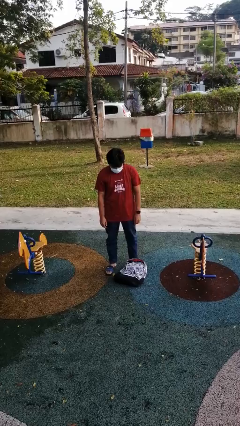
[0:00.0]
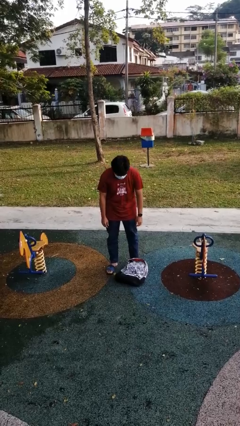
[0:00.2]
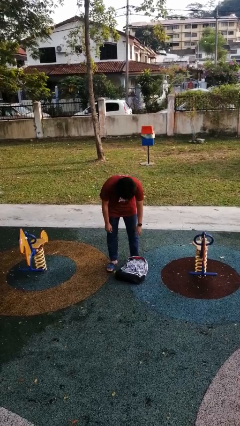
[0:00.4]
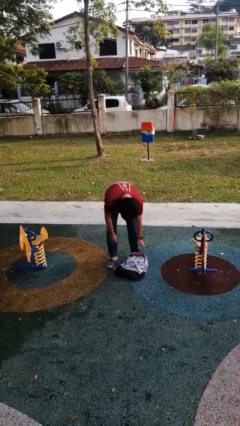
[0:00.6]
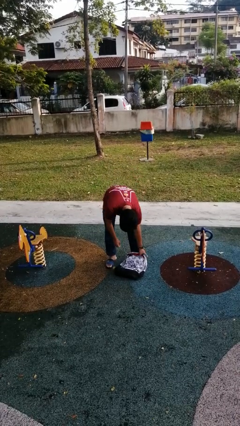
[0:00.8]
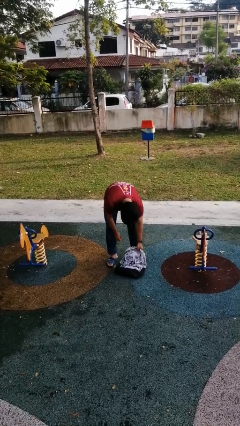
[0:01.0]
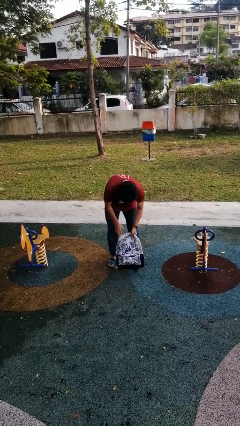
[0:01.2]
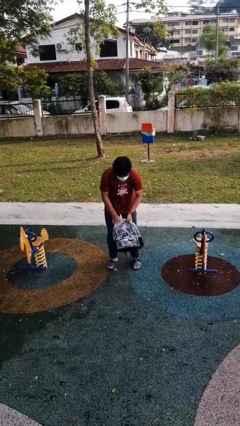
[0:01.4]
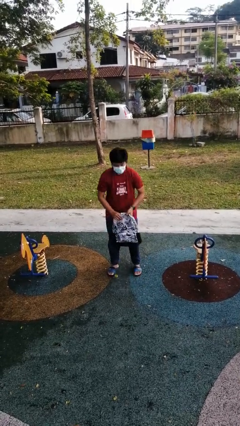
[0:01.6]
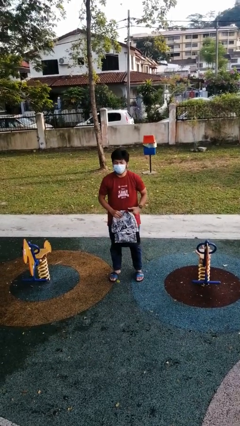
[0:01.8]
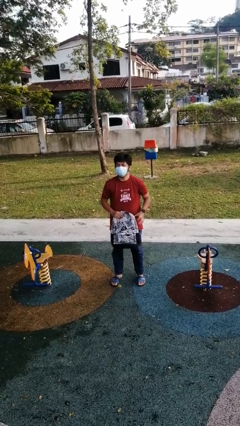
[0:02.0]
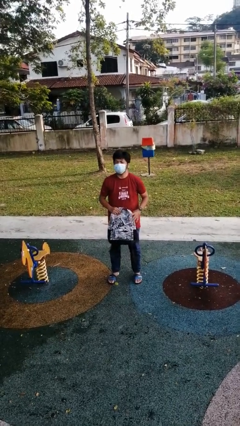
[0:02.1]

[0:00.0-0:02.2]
person picks up object from floor

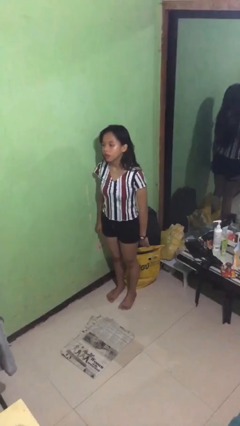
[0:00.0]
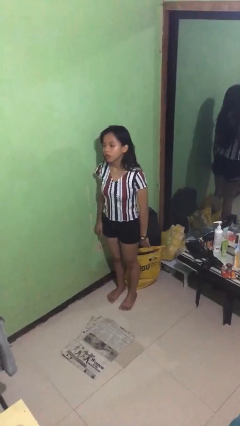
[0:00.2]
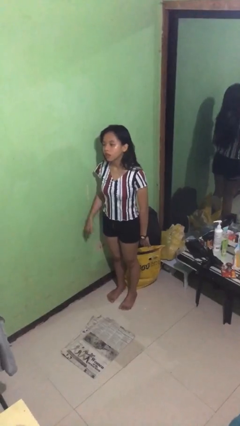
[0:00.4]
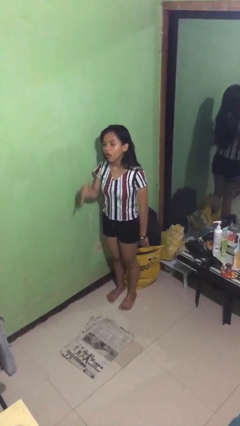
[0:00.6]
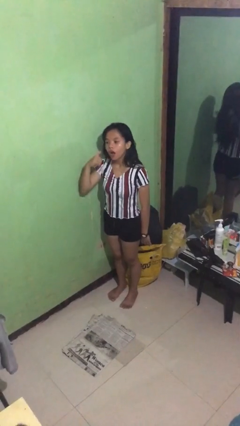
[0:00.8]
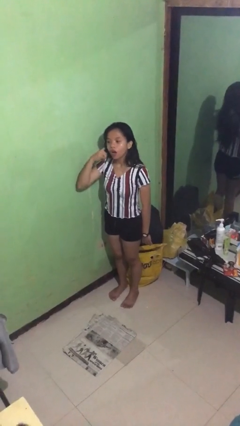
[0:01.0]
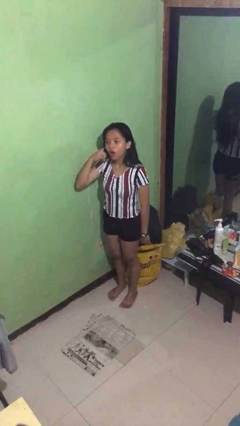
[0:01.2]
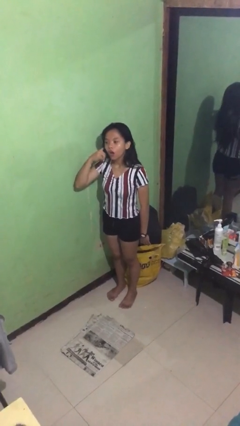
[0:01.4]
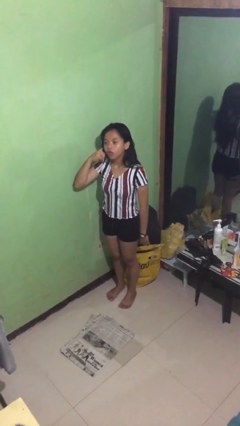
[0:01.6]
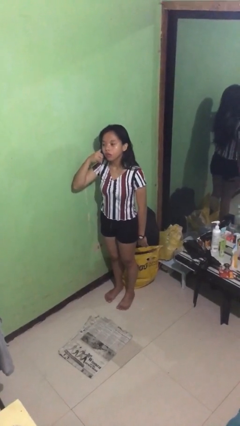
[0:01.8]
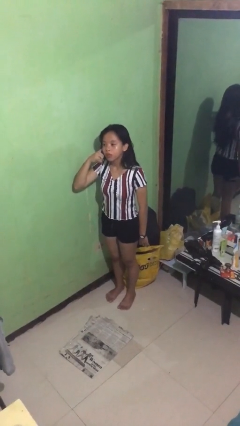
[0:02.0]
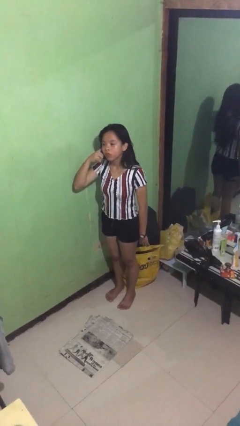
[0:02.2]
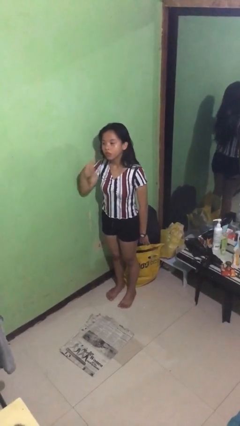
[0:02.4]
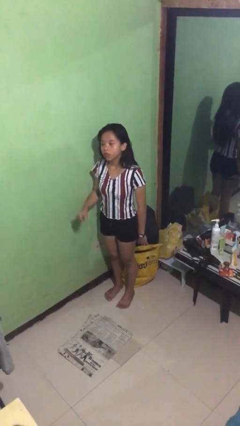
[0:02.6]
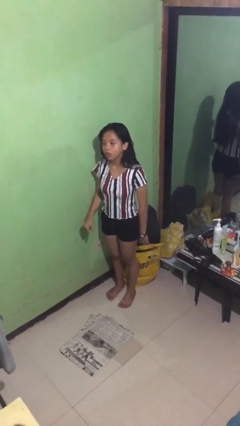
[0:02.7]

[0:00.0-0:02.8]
person gestures call me

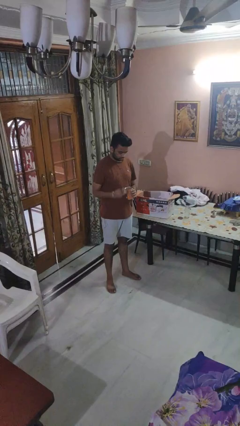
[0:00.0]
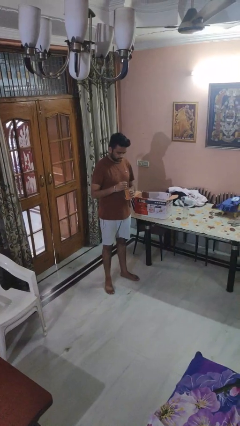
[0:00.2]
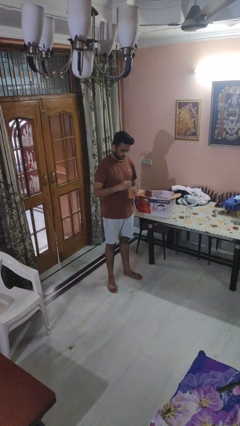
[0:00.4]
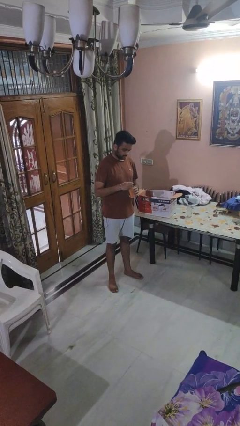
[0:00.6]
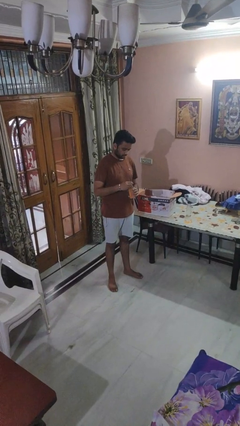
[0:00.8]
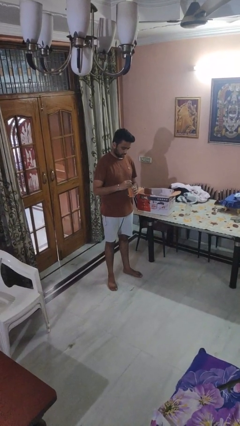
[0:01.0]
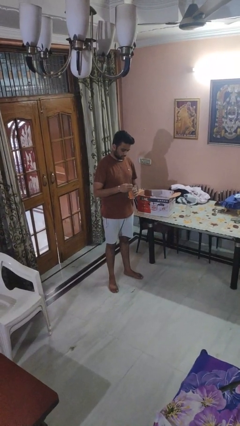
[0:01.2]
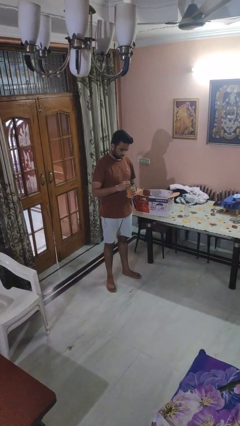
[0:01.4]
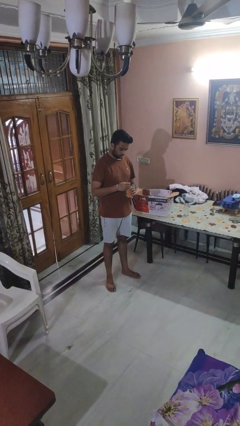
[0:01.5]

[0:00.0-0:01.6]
person opens can with can opener

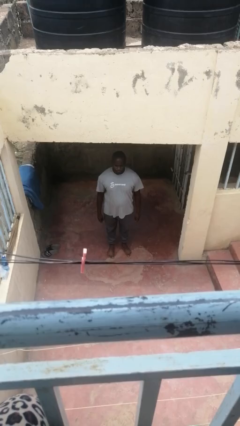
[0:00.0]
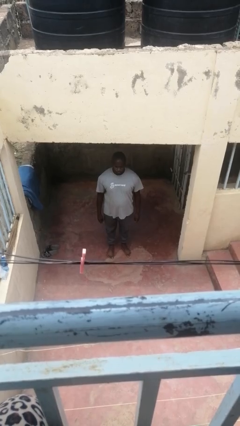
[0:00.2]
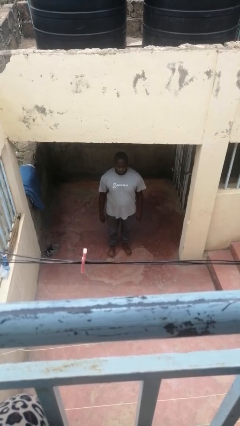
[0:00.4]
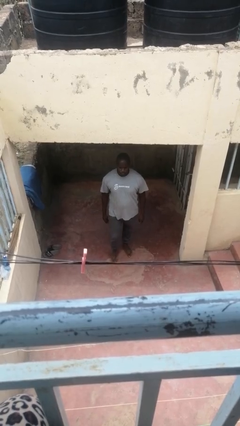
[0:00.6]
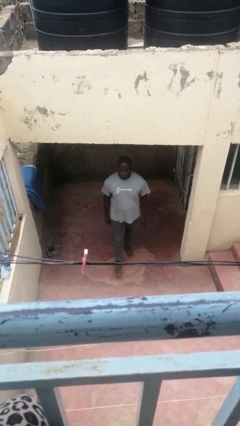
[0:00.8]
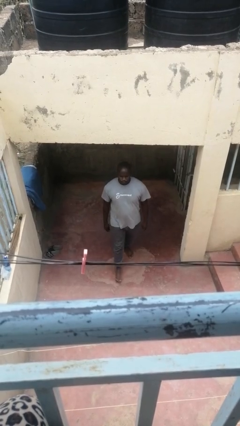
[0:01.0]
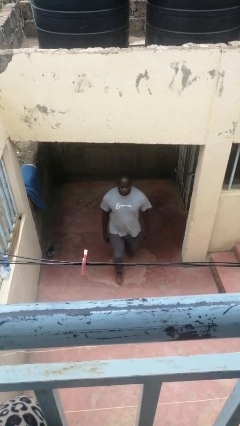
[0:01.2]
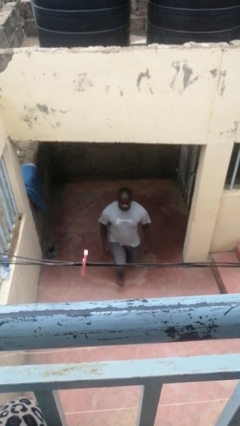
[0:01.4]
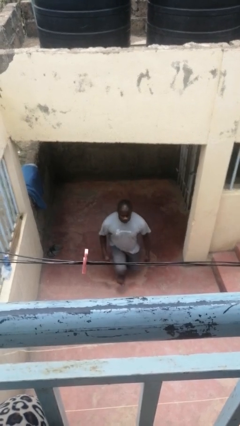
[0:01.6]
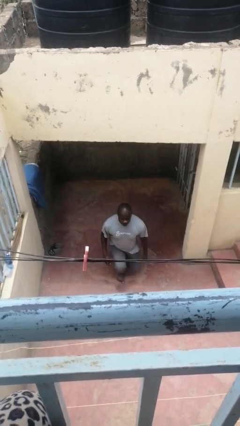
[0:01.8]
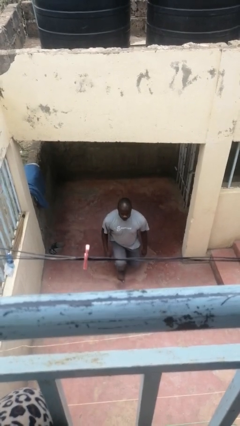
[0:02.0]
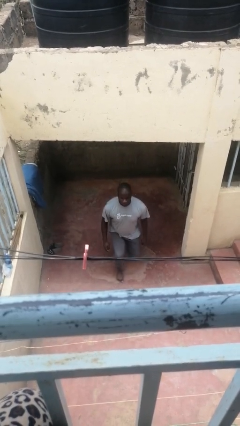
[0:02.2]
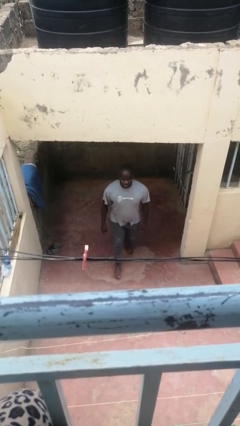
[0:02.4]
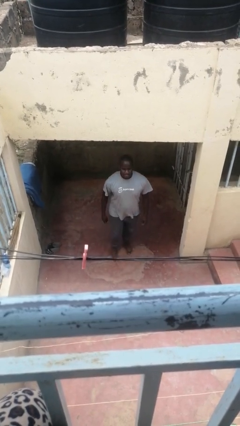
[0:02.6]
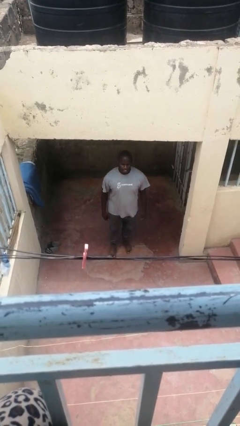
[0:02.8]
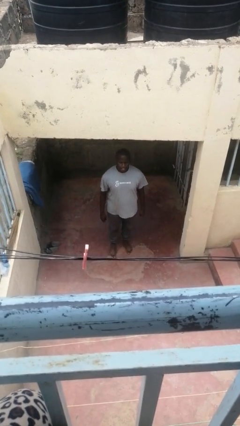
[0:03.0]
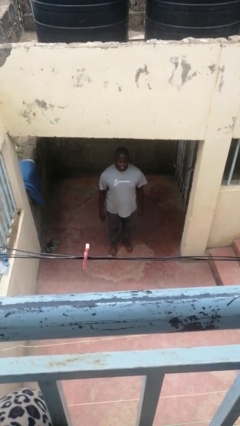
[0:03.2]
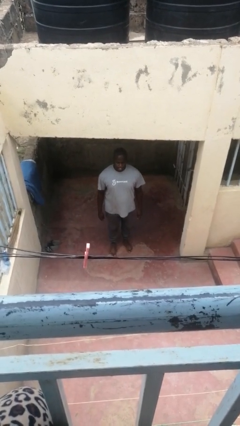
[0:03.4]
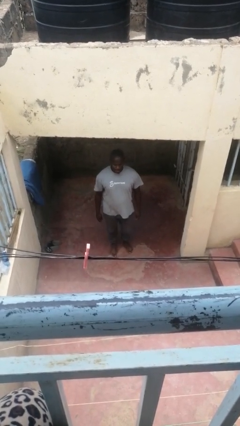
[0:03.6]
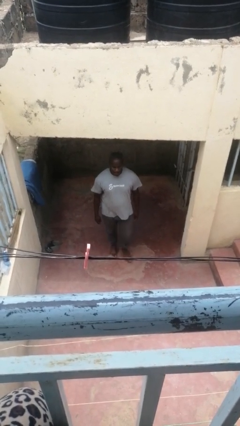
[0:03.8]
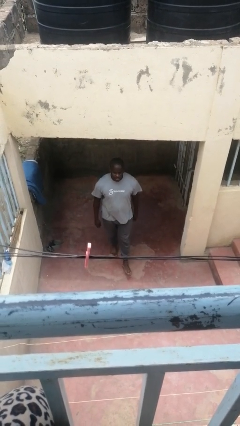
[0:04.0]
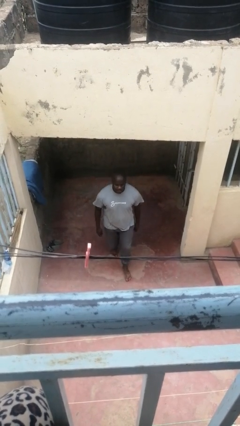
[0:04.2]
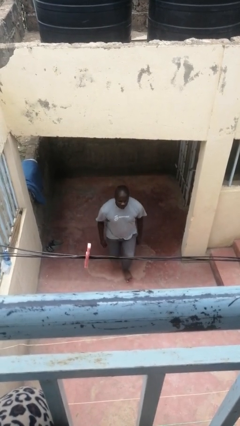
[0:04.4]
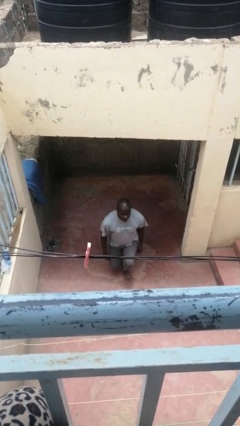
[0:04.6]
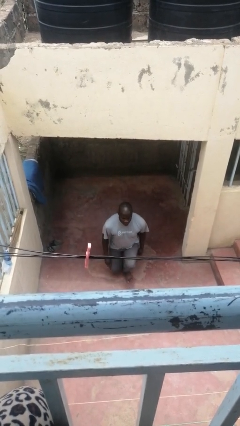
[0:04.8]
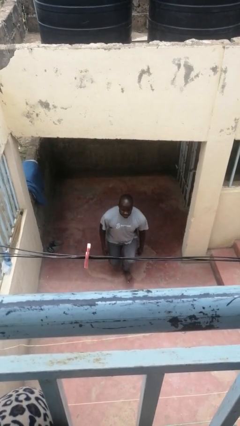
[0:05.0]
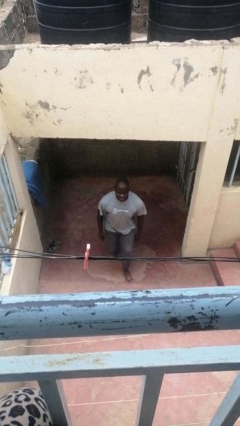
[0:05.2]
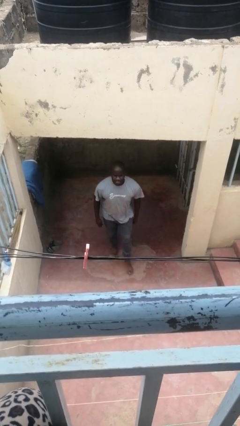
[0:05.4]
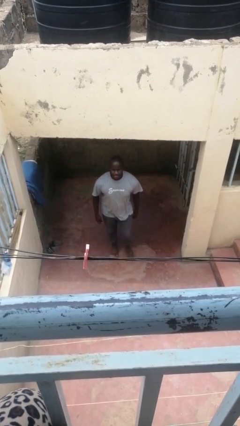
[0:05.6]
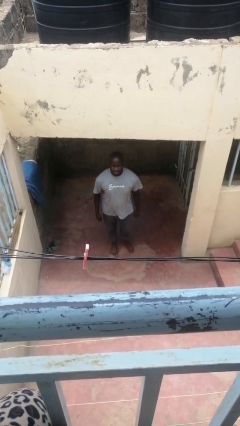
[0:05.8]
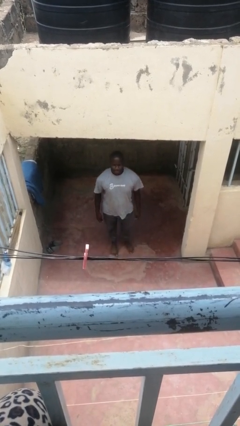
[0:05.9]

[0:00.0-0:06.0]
person exercises with lunges

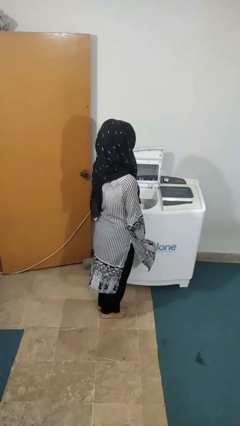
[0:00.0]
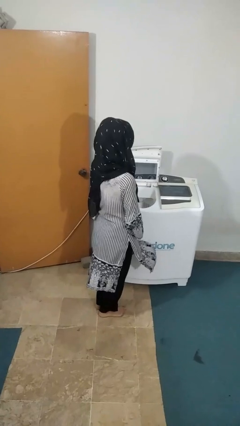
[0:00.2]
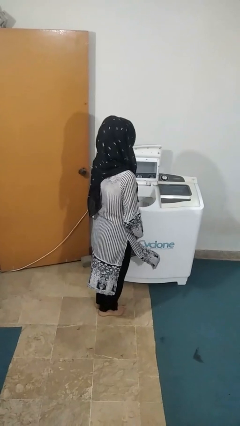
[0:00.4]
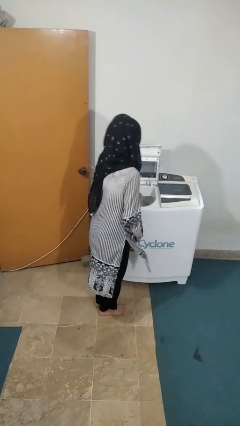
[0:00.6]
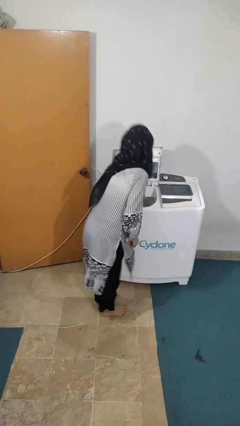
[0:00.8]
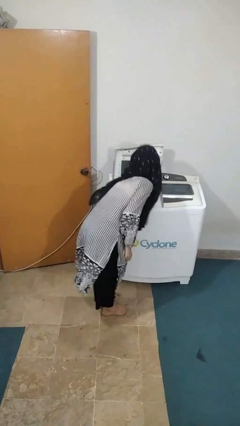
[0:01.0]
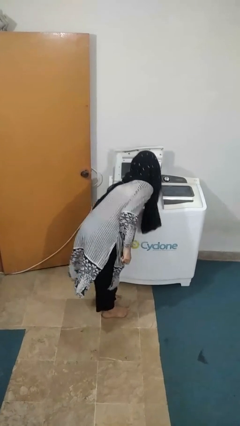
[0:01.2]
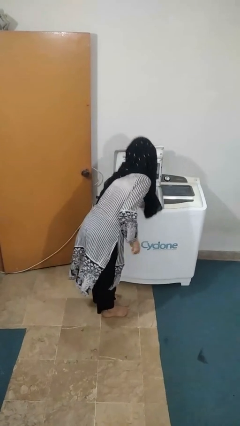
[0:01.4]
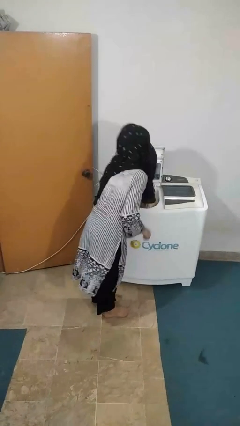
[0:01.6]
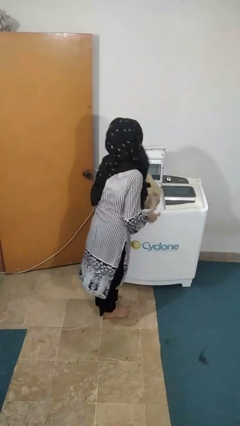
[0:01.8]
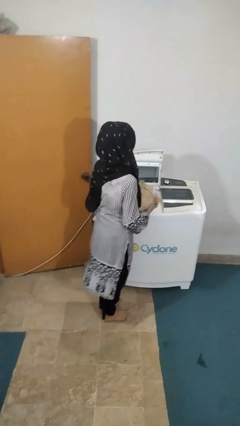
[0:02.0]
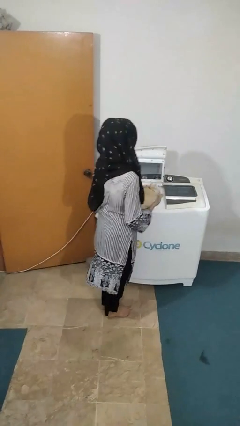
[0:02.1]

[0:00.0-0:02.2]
person unloads clotheswasher

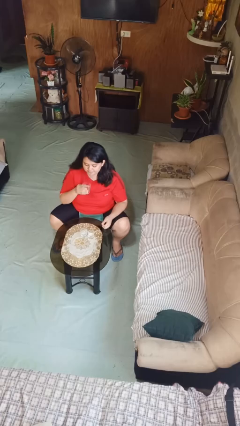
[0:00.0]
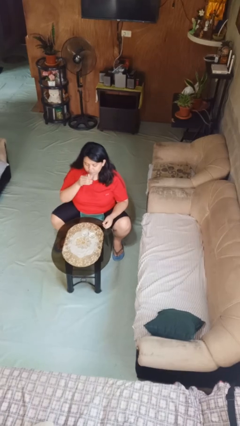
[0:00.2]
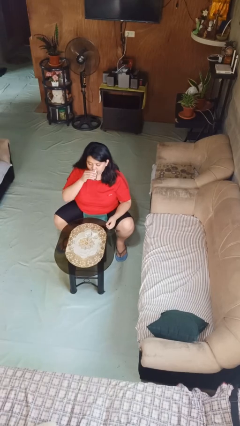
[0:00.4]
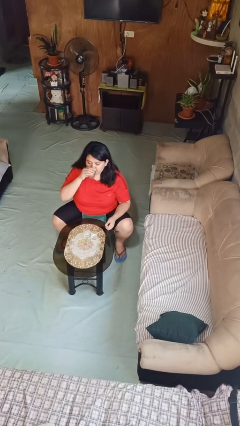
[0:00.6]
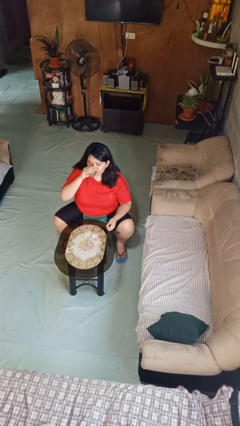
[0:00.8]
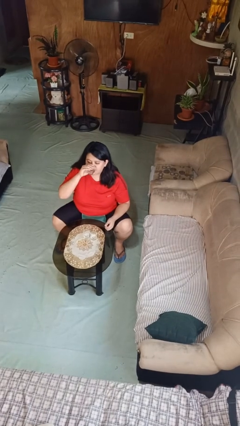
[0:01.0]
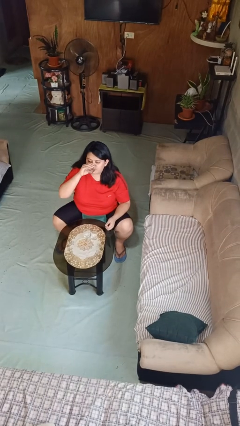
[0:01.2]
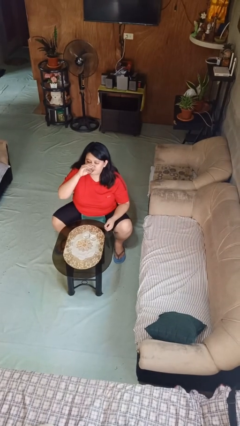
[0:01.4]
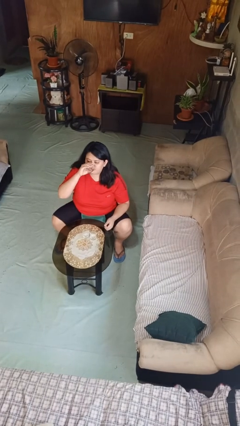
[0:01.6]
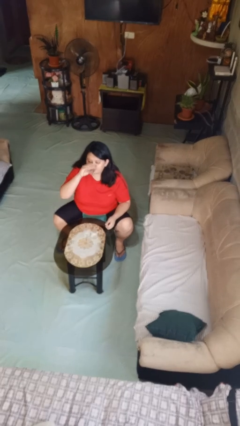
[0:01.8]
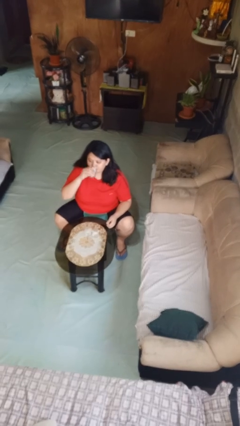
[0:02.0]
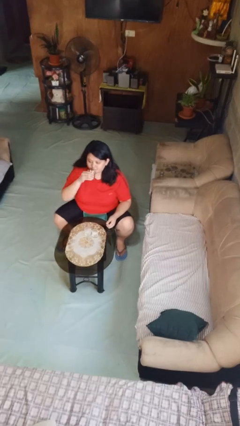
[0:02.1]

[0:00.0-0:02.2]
person drinks from shotglass

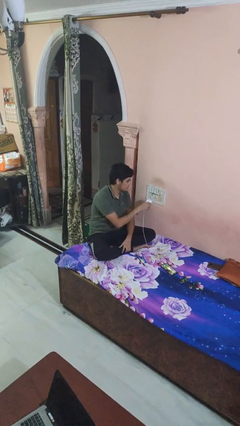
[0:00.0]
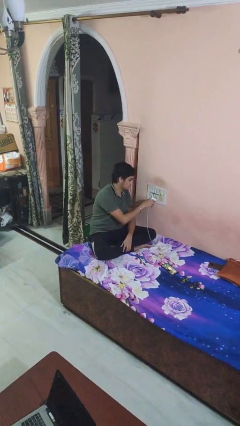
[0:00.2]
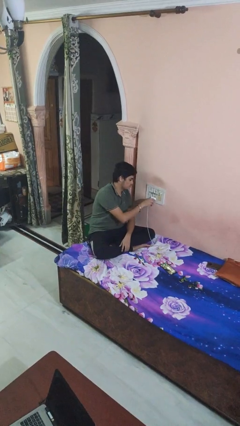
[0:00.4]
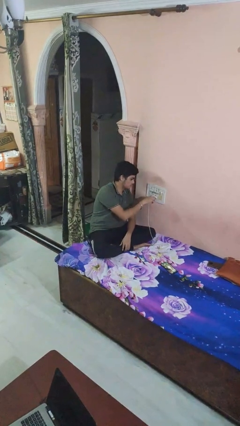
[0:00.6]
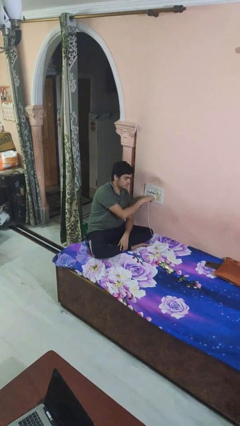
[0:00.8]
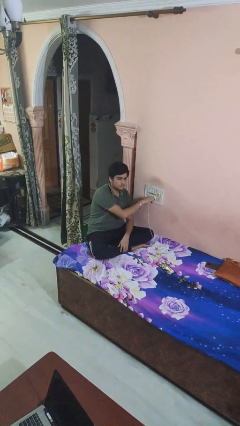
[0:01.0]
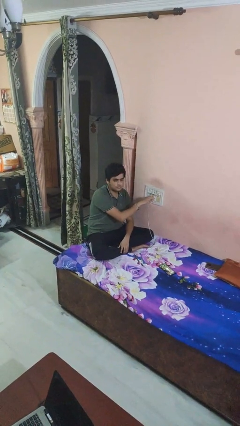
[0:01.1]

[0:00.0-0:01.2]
person plugs into electrical socket
